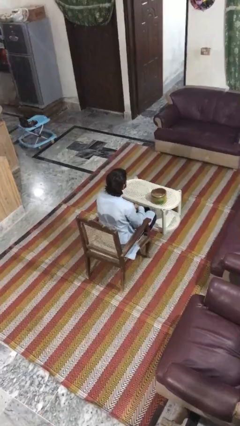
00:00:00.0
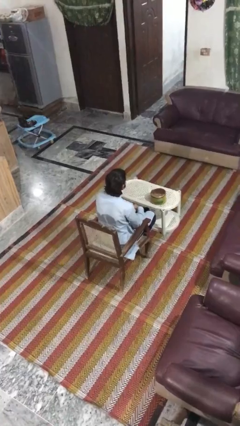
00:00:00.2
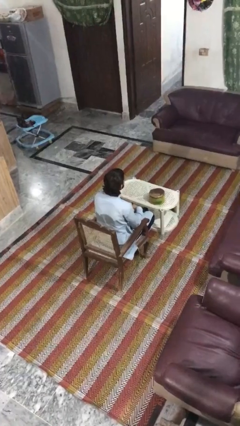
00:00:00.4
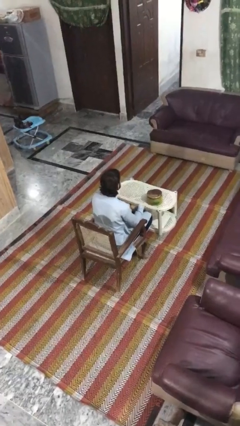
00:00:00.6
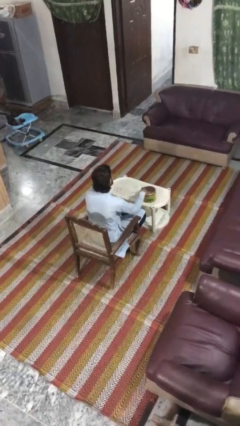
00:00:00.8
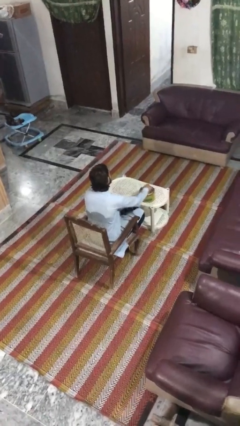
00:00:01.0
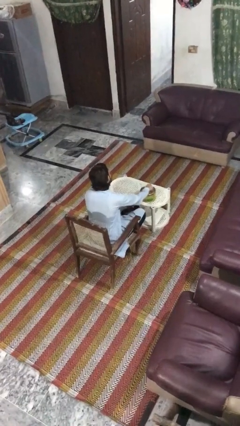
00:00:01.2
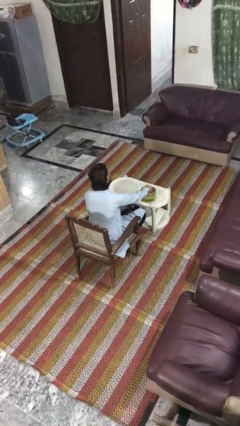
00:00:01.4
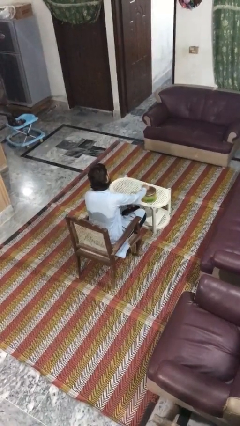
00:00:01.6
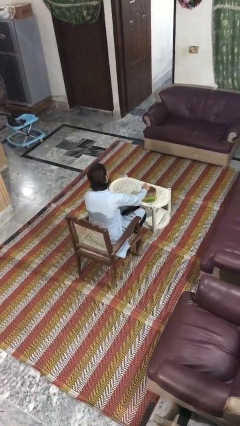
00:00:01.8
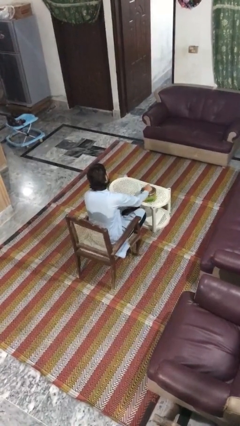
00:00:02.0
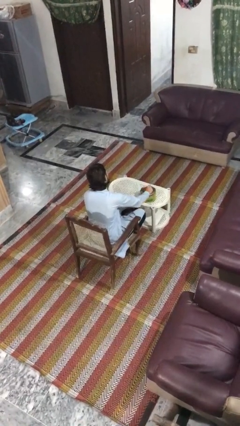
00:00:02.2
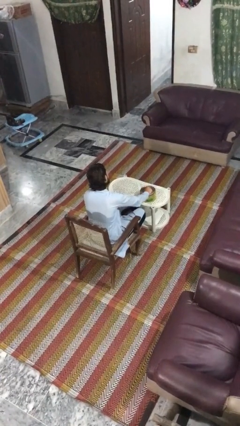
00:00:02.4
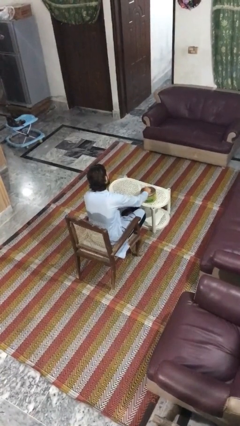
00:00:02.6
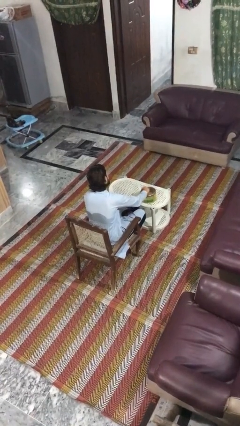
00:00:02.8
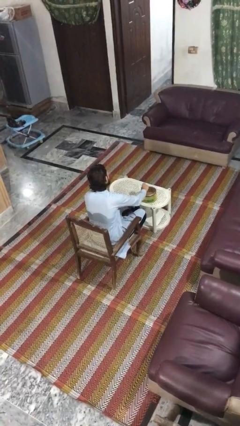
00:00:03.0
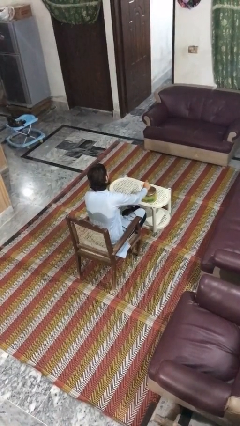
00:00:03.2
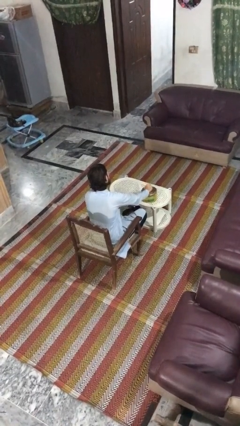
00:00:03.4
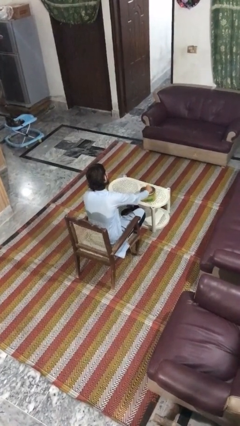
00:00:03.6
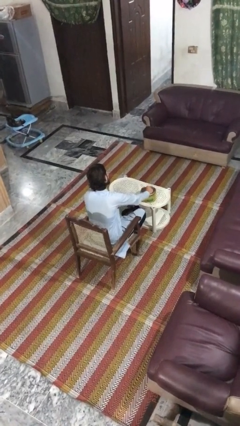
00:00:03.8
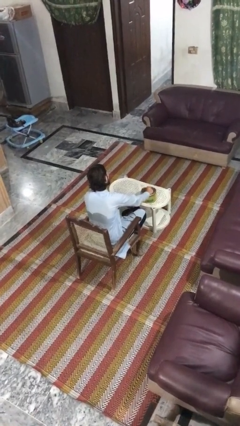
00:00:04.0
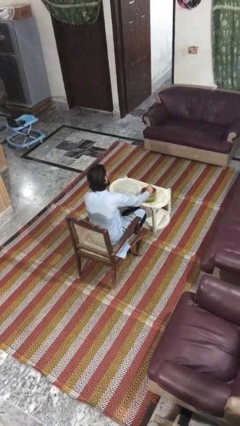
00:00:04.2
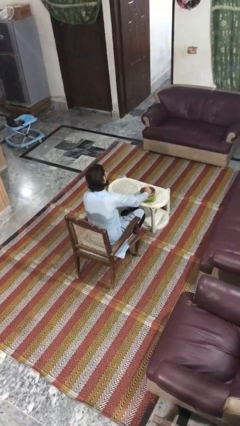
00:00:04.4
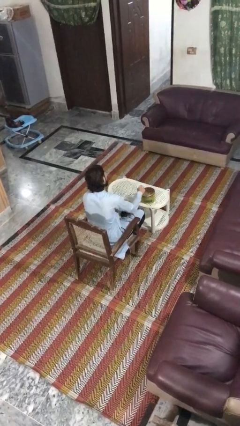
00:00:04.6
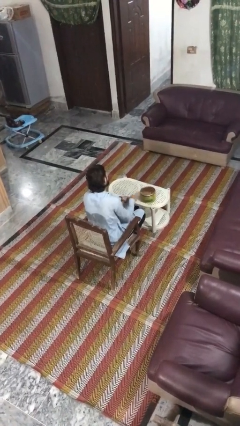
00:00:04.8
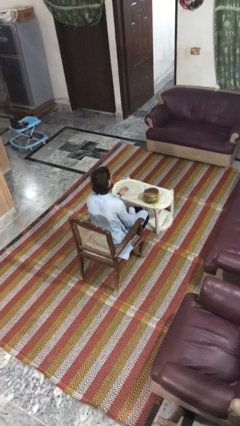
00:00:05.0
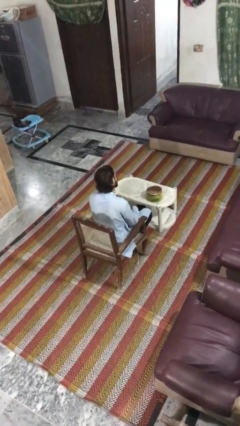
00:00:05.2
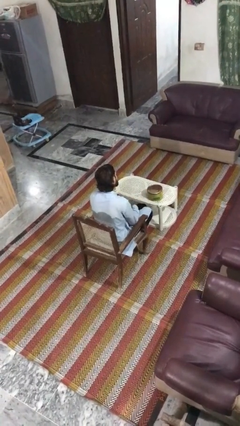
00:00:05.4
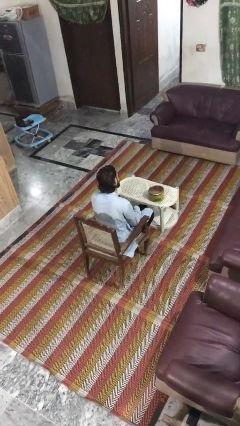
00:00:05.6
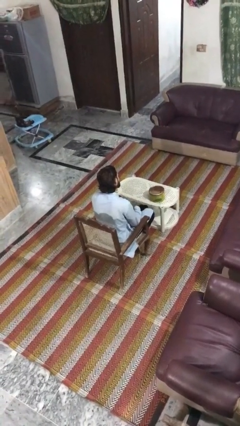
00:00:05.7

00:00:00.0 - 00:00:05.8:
person taps object with finger

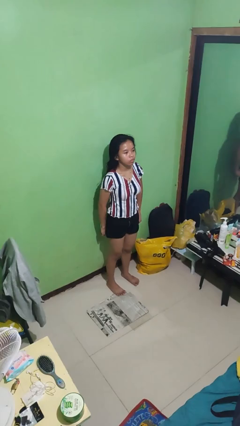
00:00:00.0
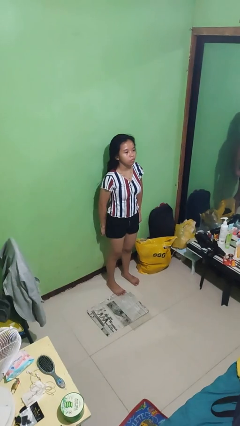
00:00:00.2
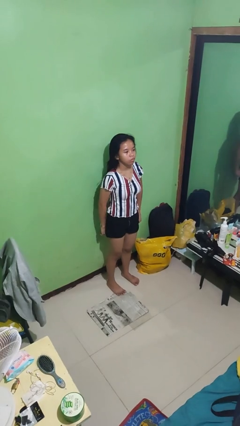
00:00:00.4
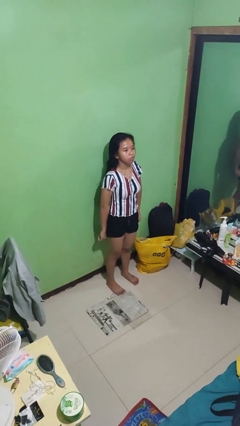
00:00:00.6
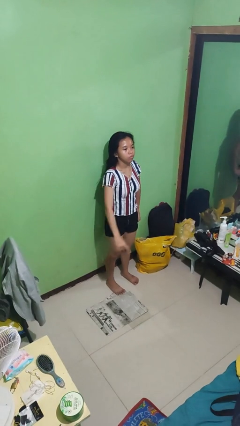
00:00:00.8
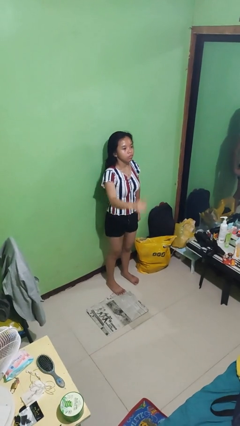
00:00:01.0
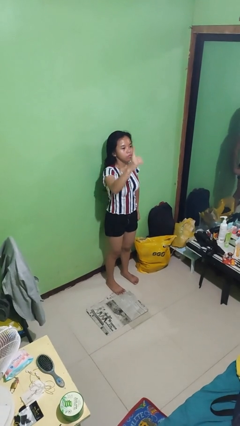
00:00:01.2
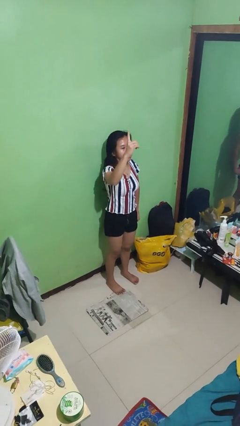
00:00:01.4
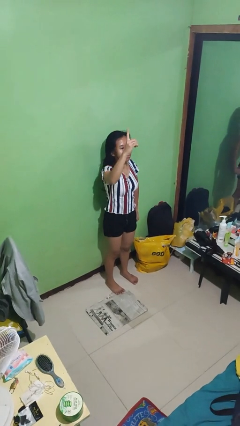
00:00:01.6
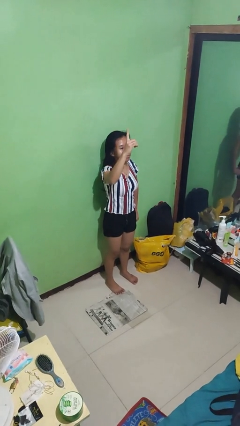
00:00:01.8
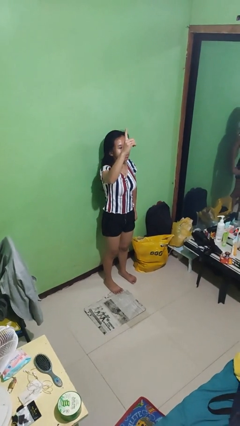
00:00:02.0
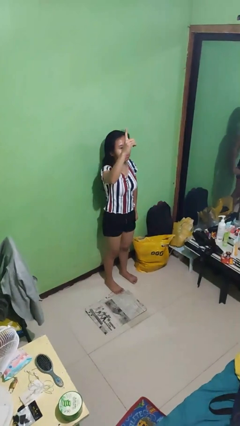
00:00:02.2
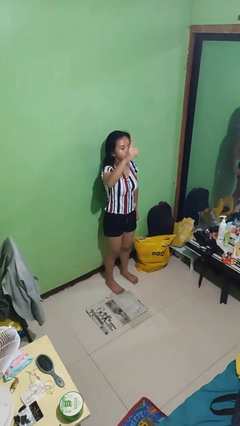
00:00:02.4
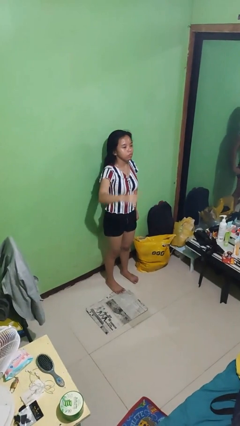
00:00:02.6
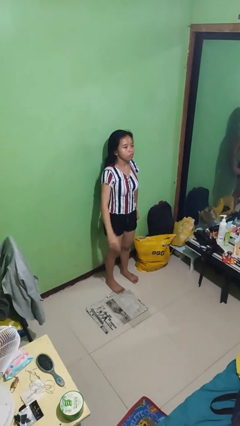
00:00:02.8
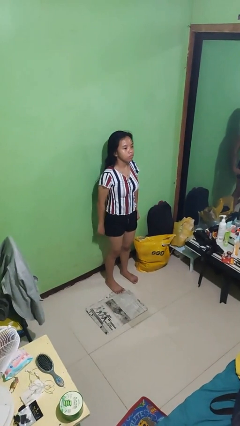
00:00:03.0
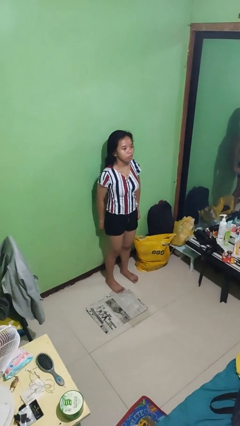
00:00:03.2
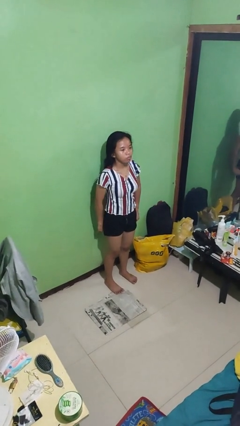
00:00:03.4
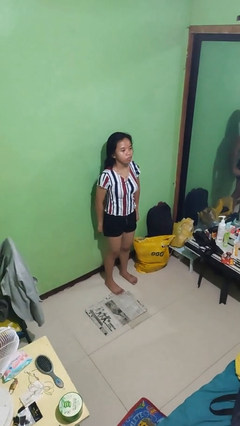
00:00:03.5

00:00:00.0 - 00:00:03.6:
person gestures number one

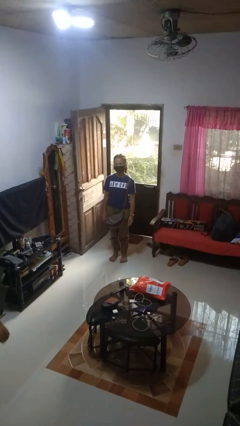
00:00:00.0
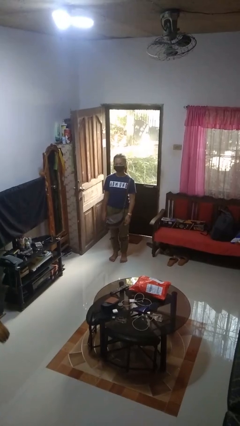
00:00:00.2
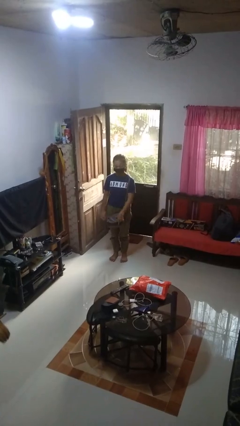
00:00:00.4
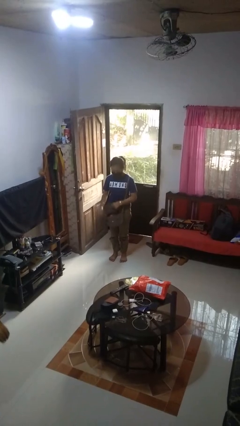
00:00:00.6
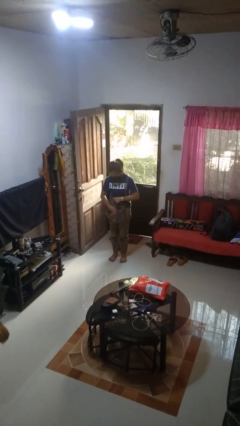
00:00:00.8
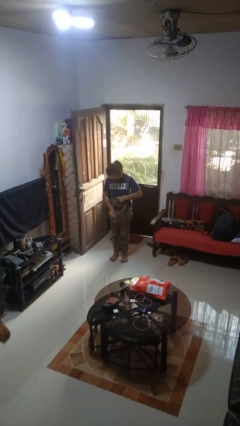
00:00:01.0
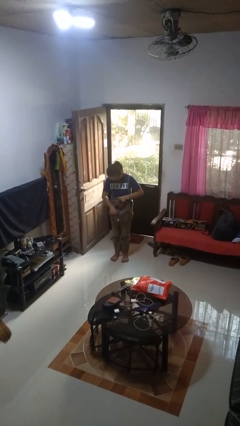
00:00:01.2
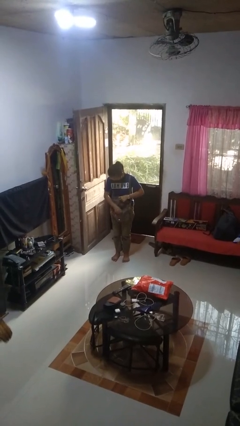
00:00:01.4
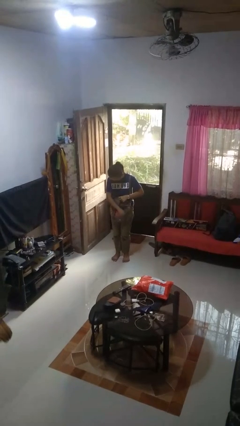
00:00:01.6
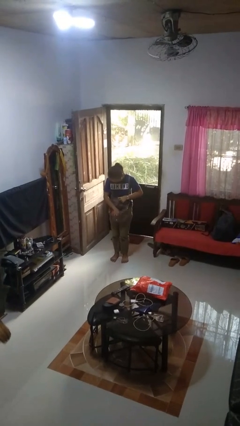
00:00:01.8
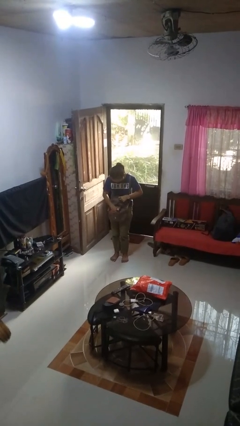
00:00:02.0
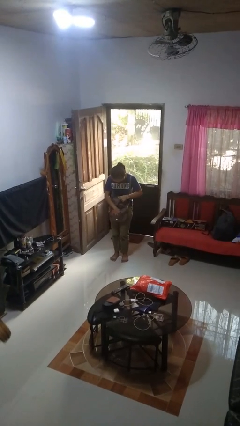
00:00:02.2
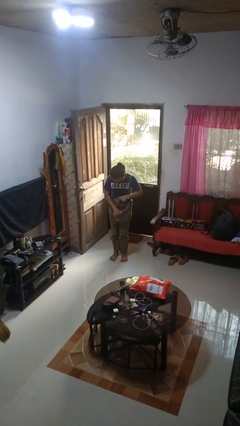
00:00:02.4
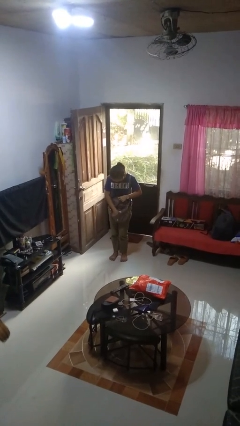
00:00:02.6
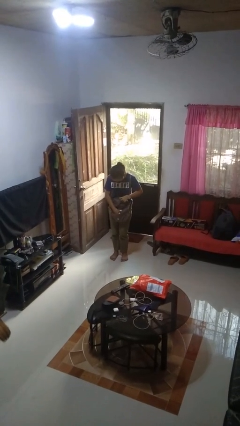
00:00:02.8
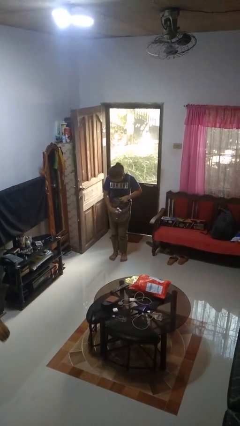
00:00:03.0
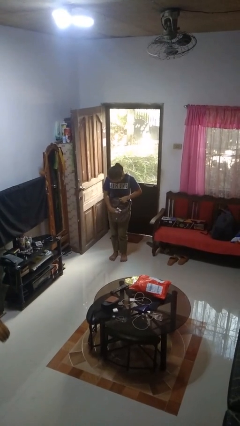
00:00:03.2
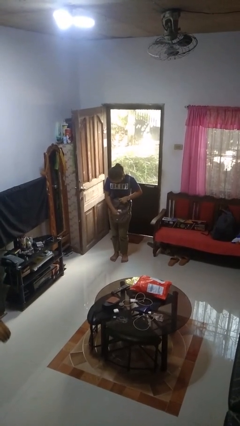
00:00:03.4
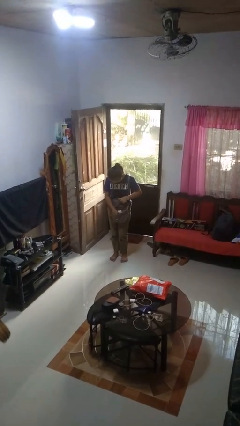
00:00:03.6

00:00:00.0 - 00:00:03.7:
person searches in purse

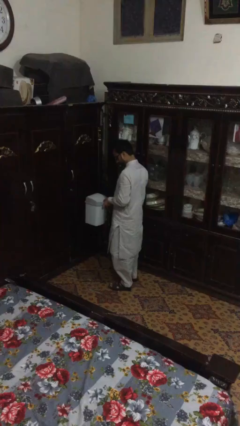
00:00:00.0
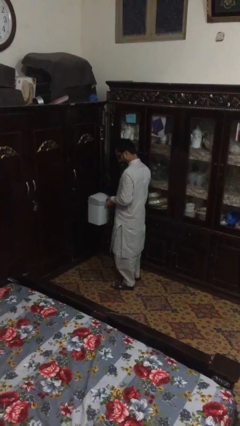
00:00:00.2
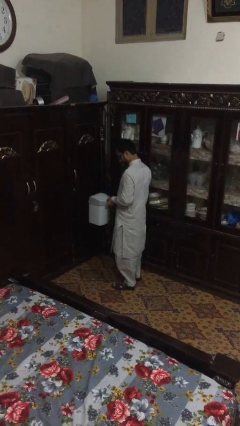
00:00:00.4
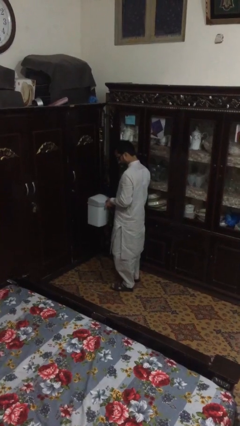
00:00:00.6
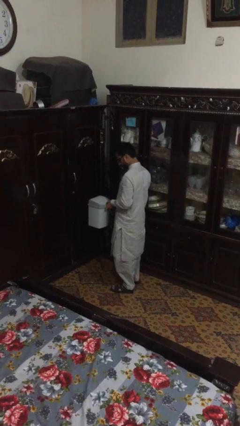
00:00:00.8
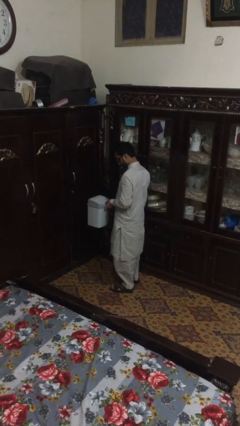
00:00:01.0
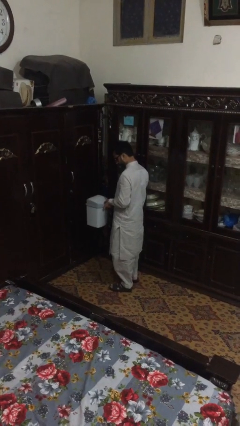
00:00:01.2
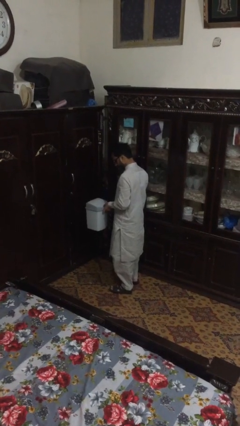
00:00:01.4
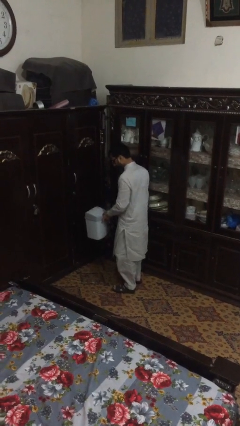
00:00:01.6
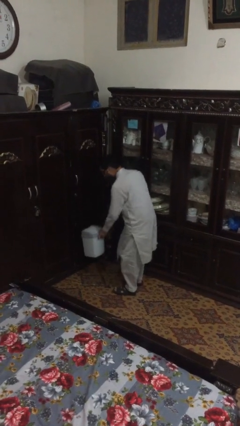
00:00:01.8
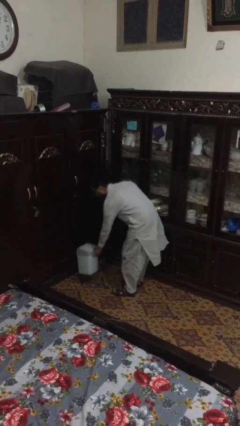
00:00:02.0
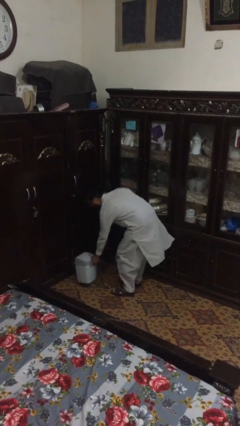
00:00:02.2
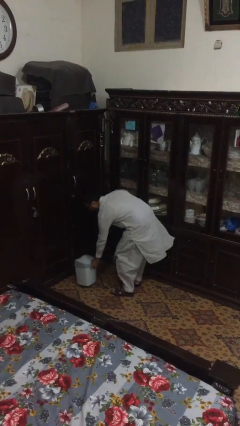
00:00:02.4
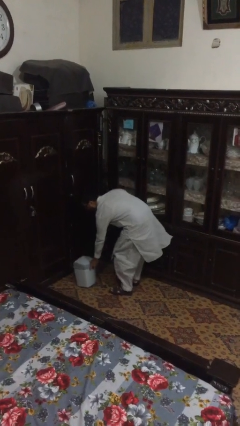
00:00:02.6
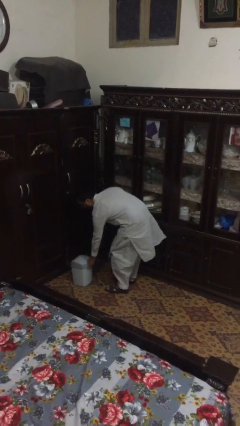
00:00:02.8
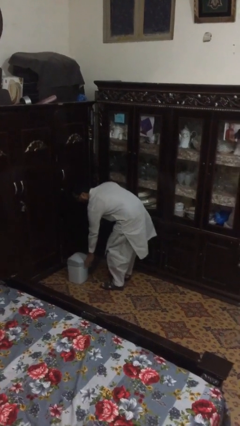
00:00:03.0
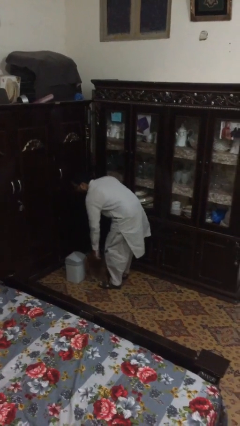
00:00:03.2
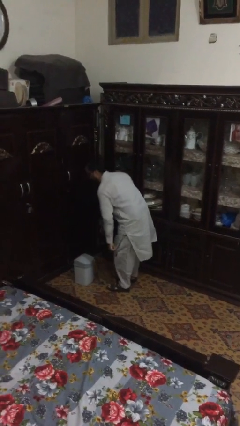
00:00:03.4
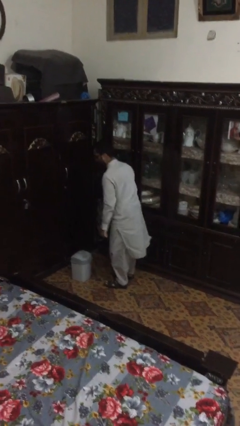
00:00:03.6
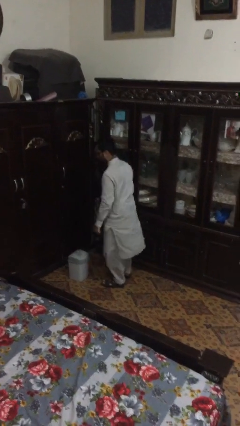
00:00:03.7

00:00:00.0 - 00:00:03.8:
person puts down object on floor

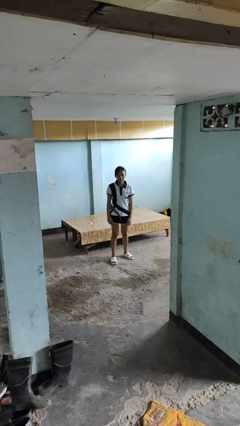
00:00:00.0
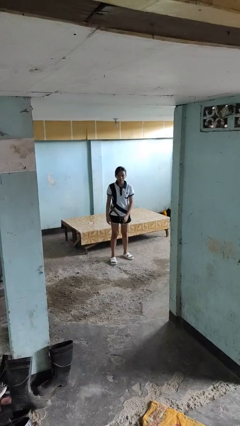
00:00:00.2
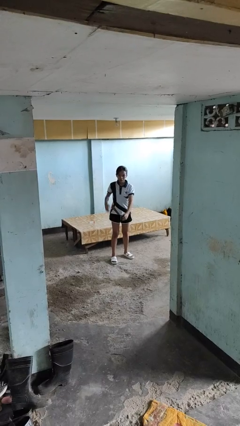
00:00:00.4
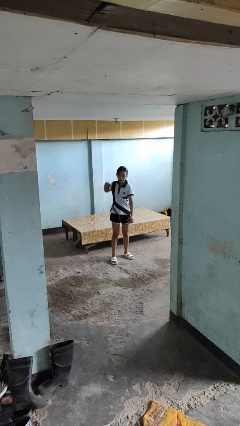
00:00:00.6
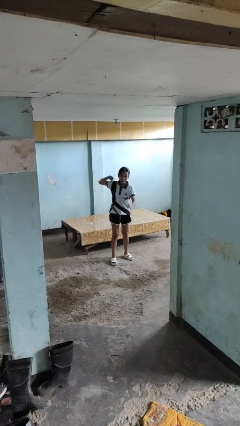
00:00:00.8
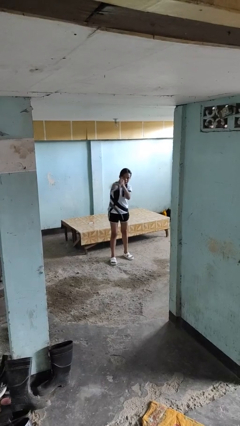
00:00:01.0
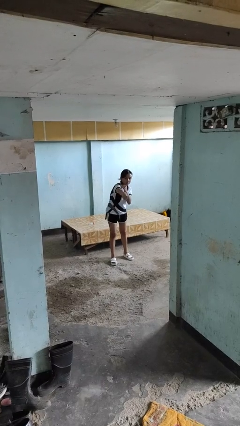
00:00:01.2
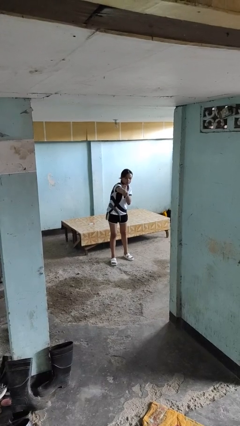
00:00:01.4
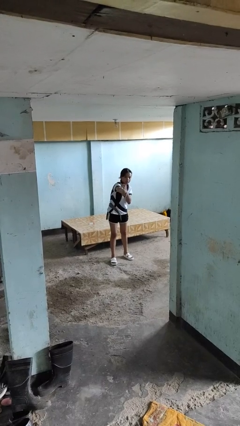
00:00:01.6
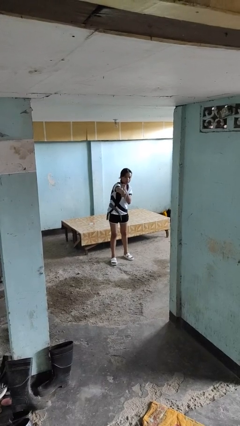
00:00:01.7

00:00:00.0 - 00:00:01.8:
person punches
